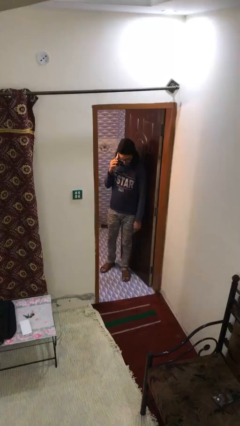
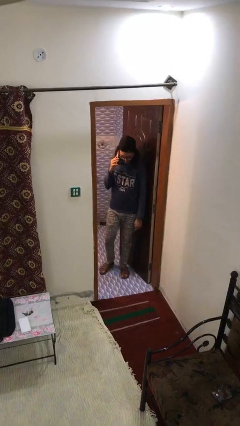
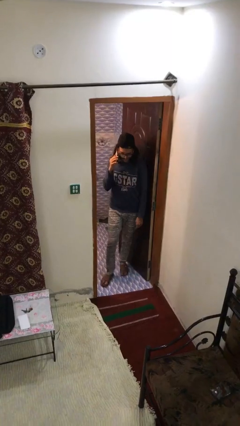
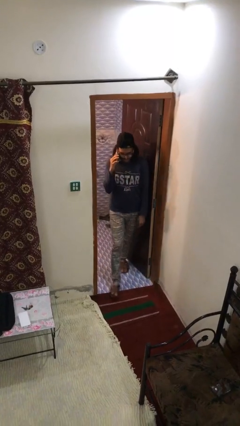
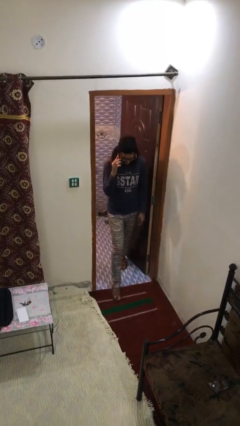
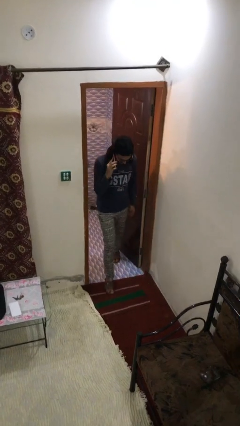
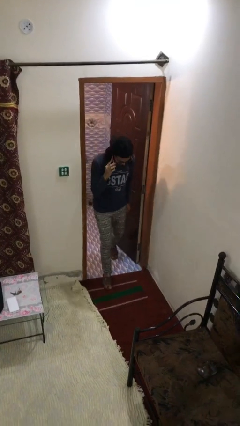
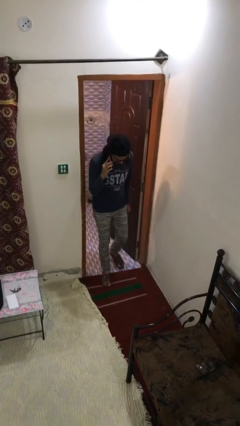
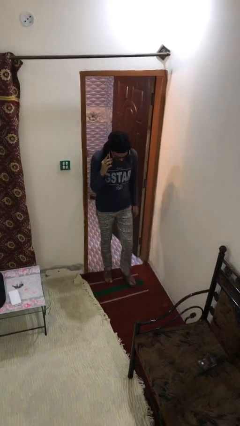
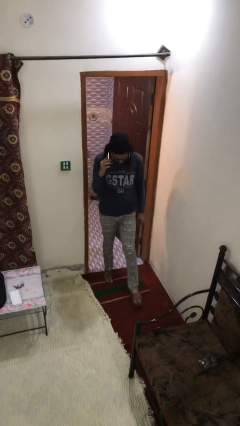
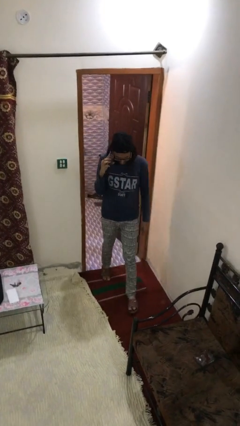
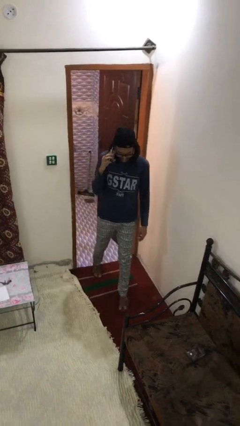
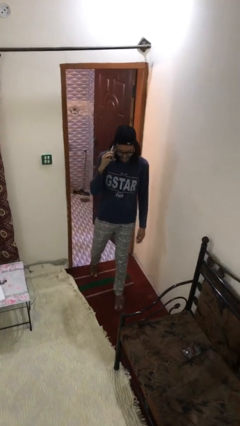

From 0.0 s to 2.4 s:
person enters scene through structure

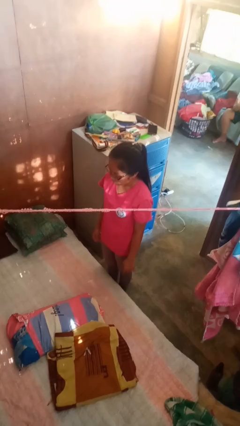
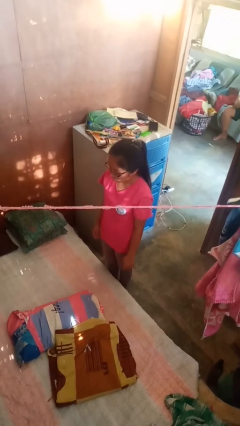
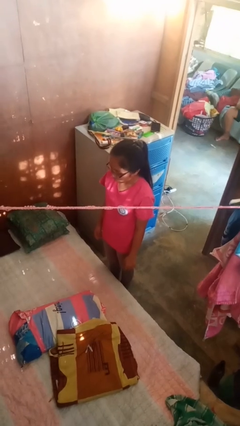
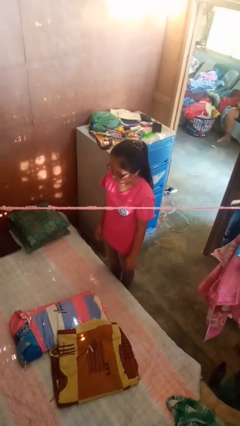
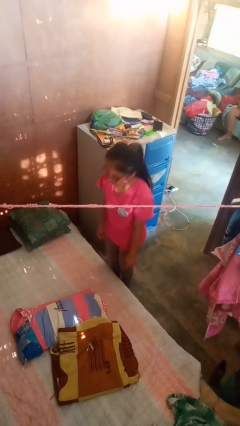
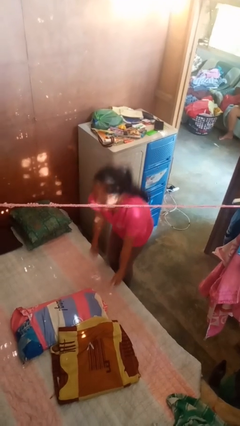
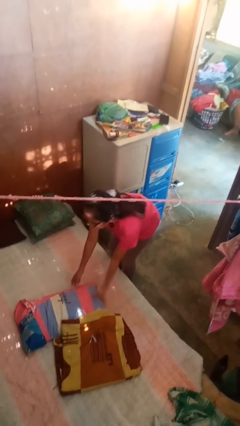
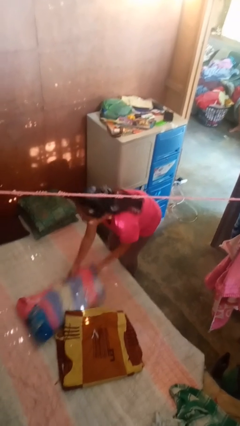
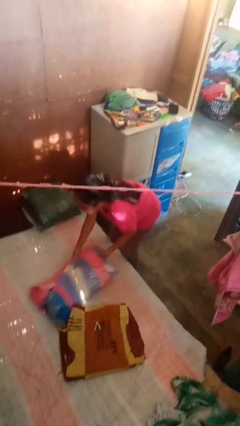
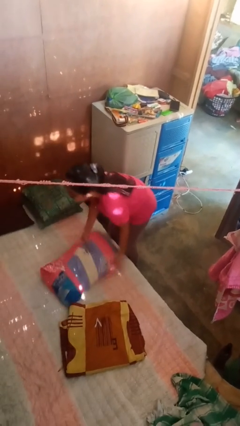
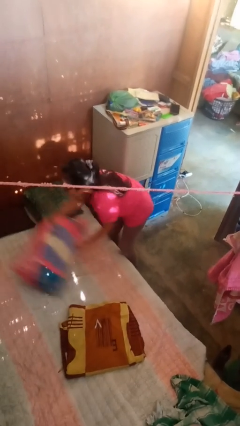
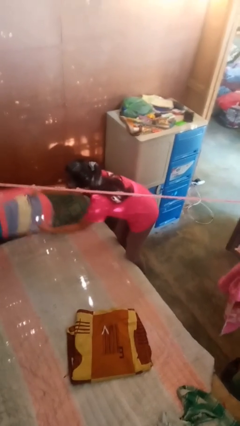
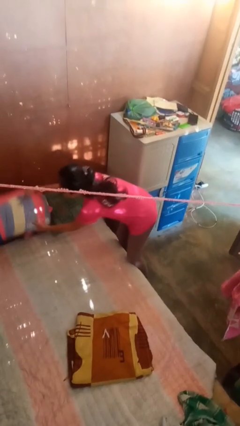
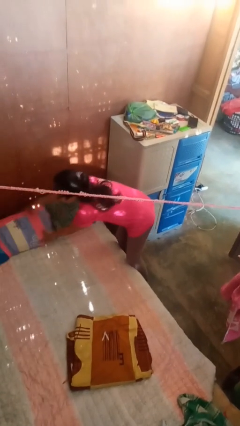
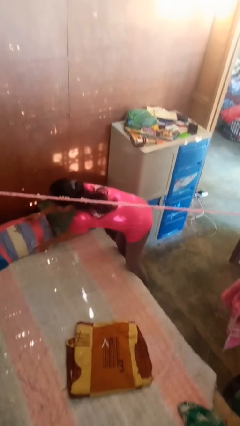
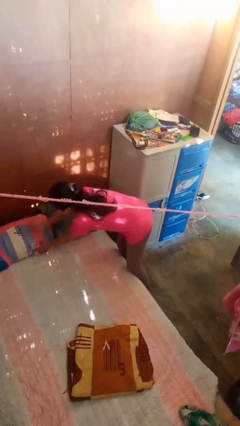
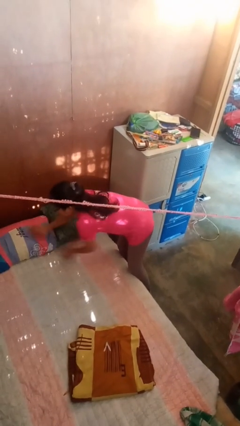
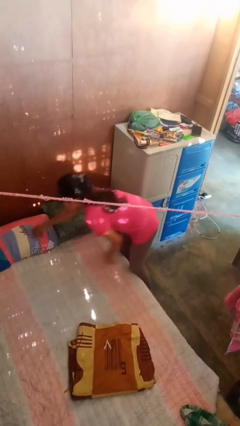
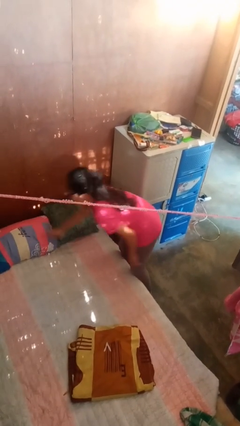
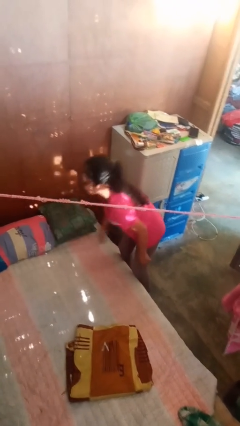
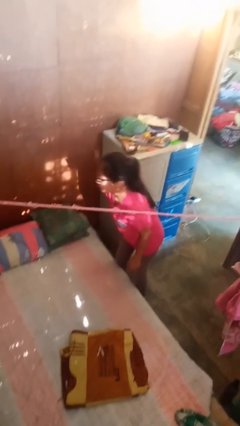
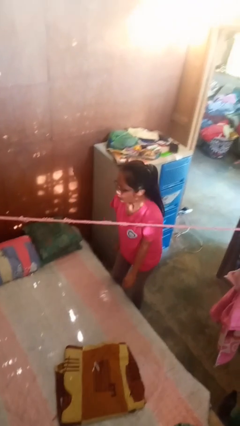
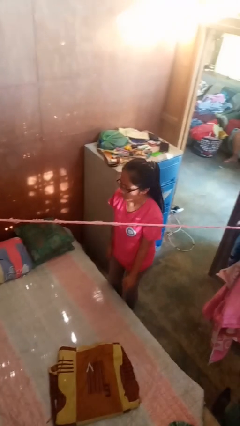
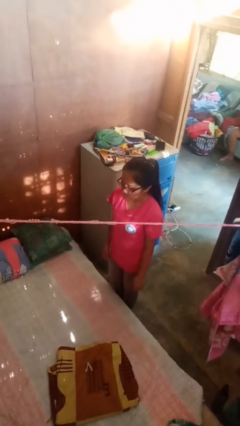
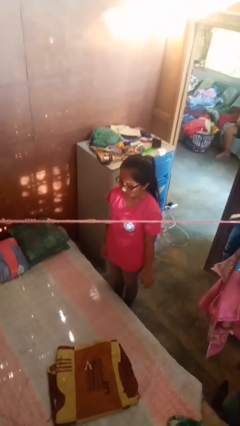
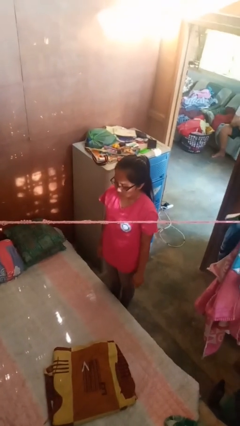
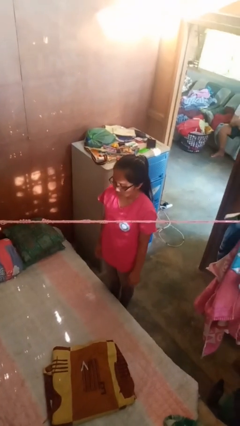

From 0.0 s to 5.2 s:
person makes bed

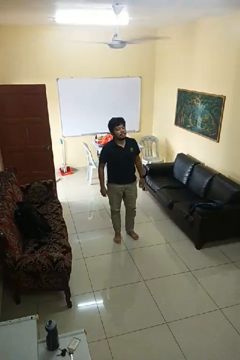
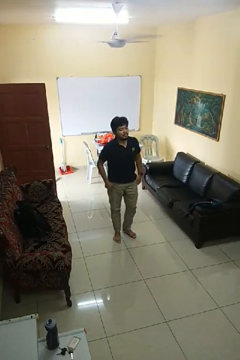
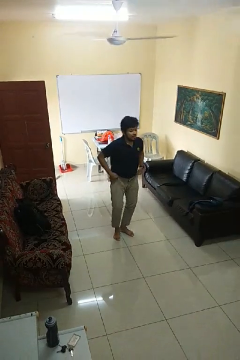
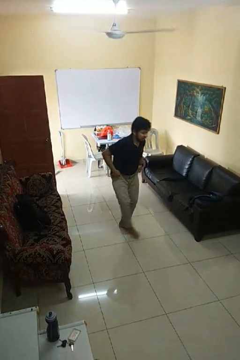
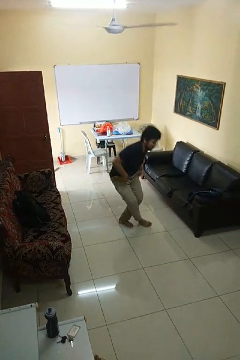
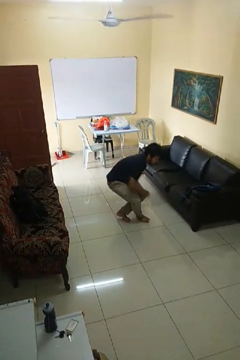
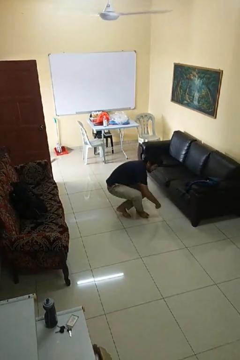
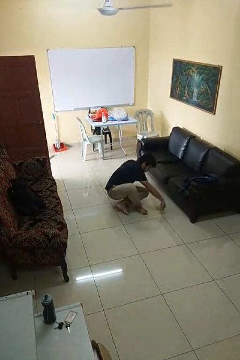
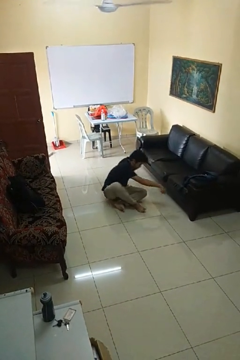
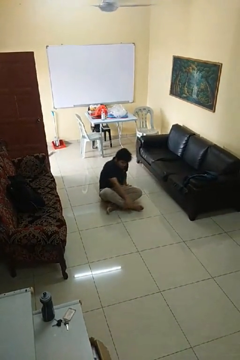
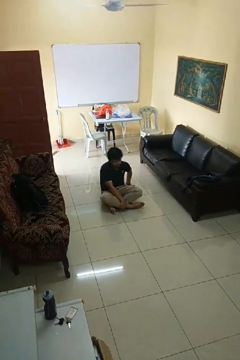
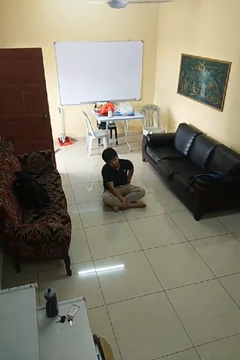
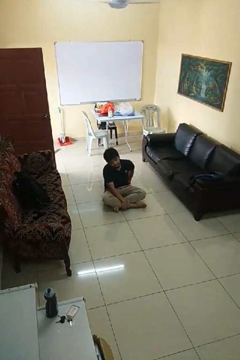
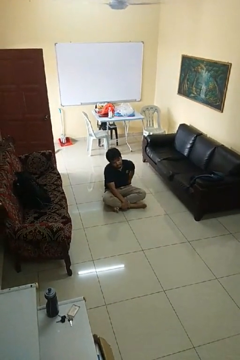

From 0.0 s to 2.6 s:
person sits crisscross

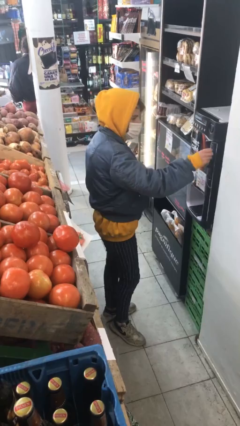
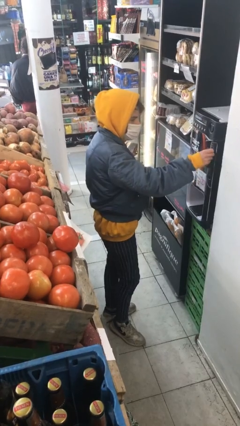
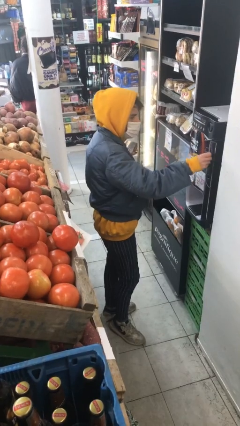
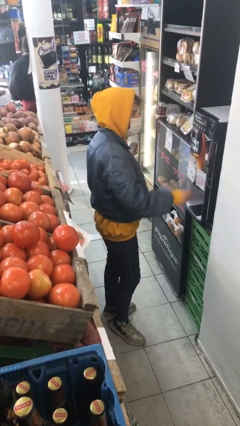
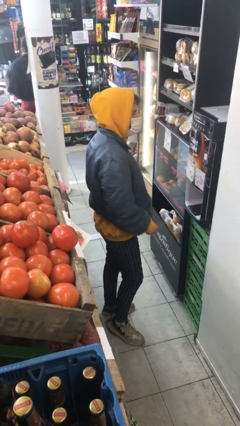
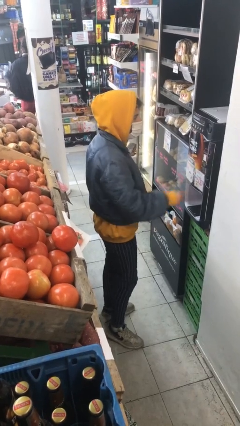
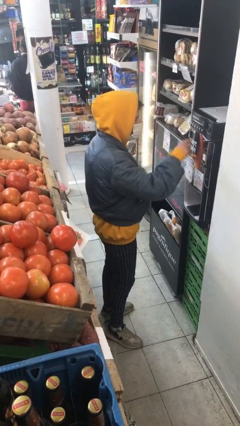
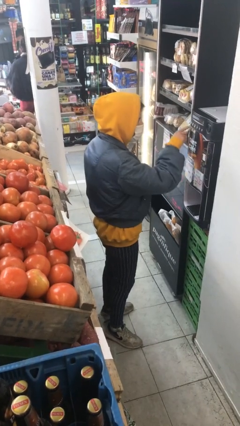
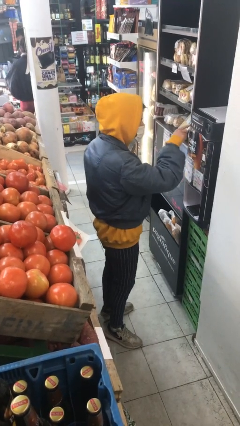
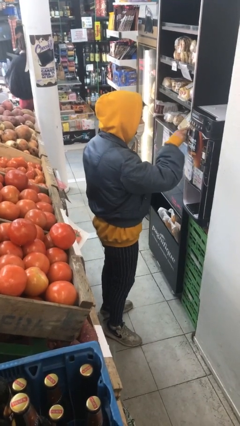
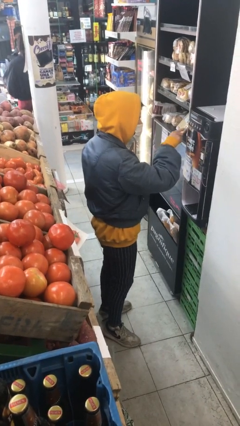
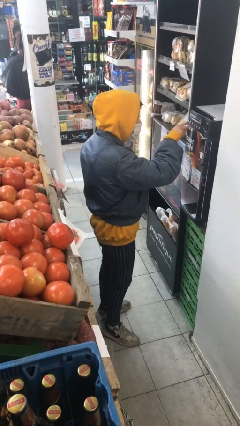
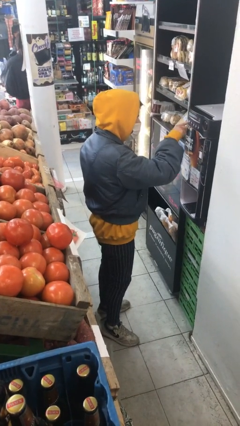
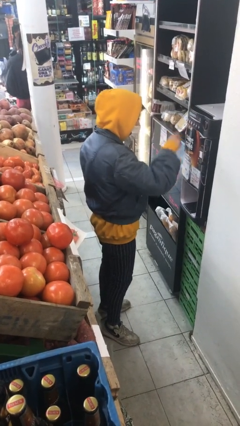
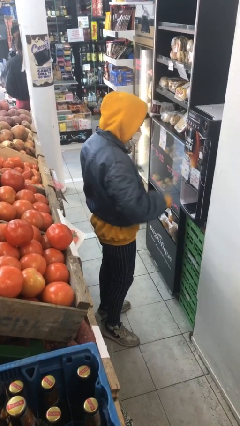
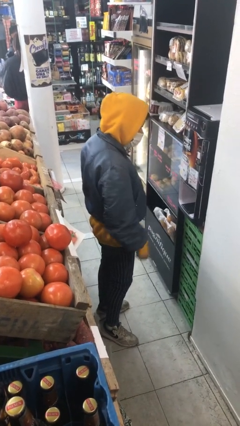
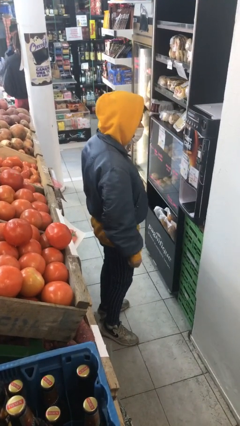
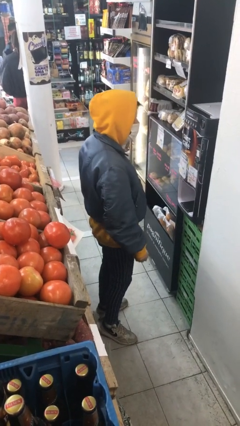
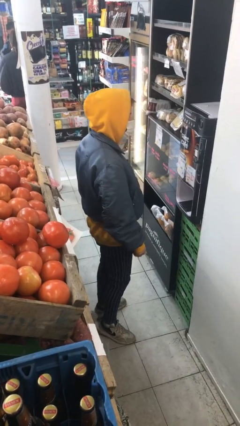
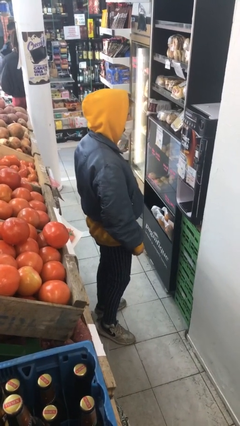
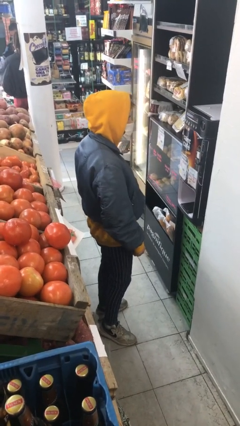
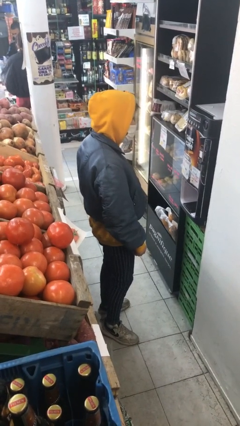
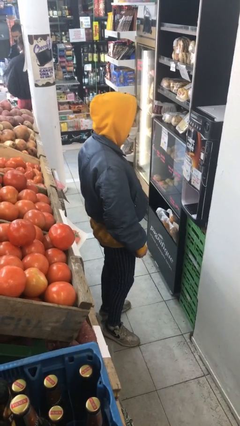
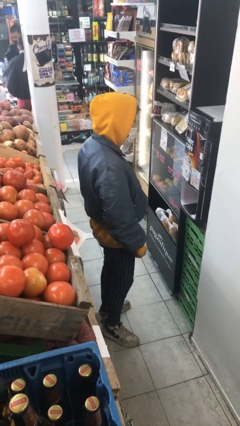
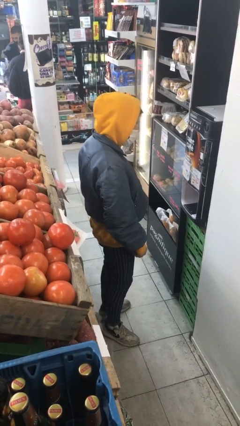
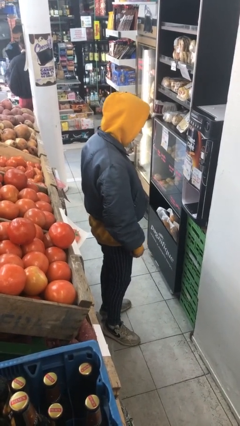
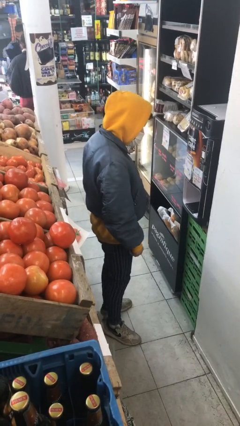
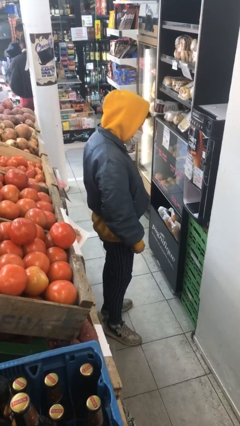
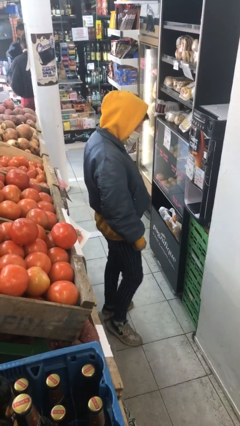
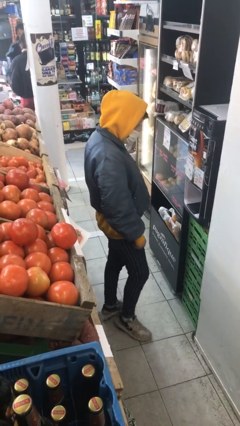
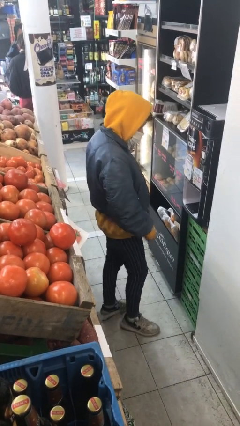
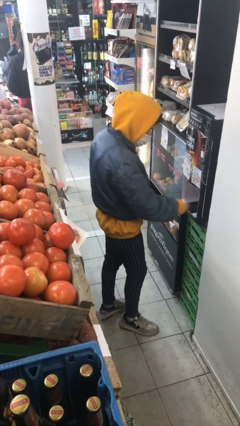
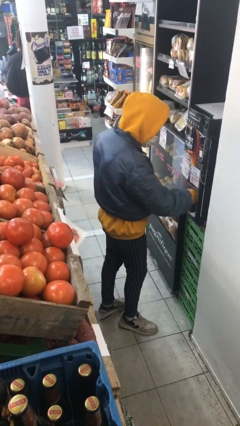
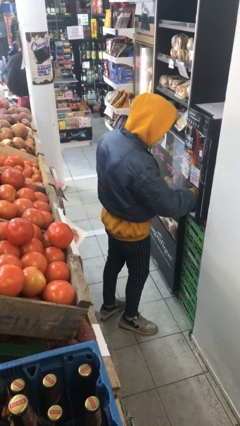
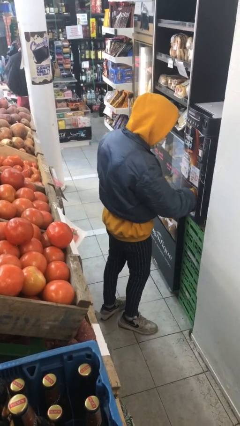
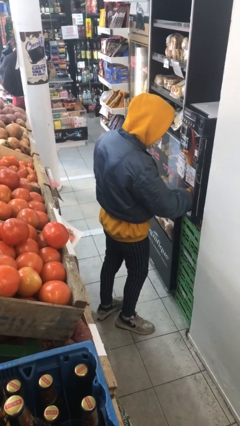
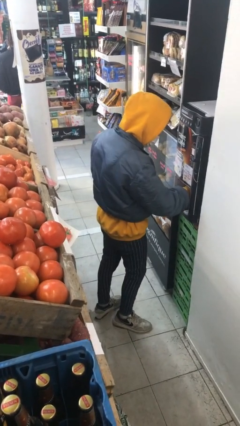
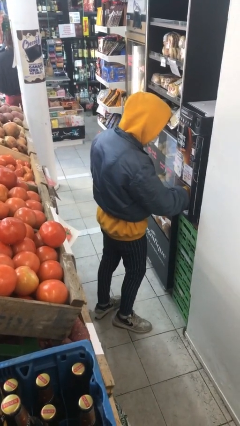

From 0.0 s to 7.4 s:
person purchases from machine

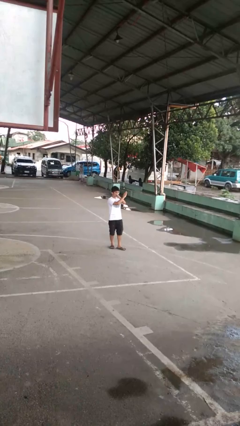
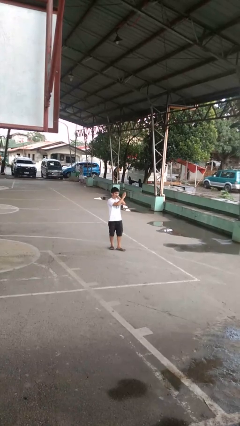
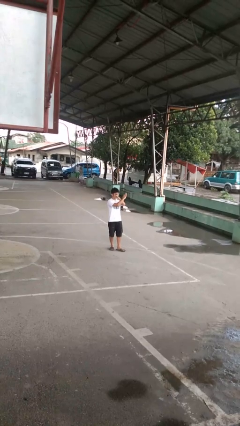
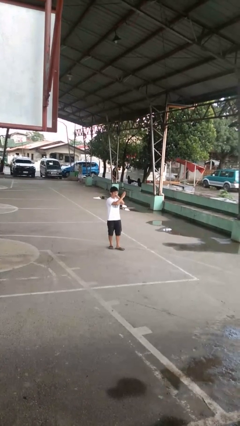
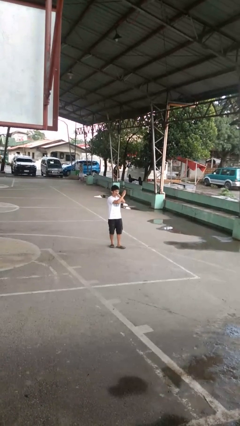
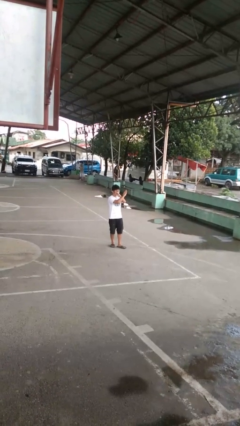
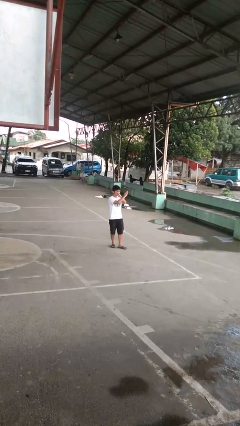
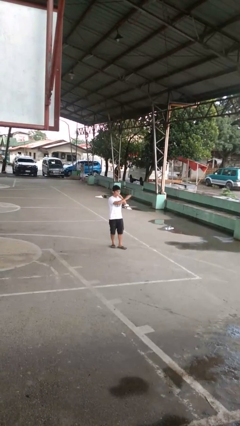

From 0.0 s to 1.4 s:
person gestures arms x
